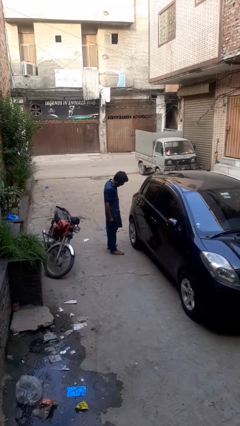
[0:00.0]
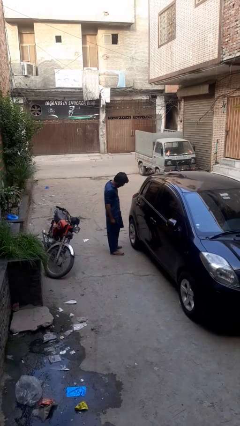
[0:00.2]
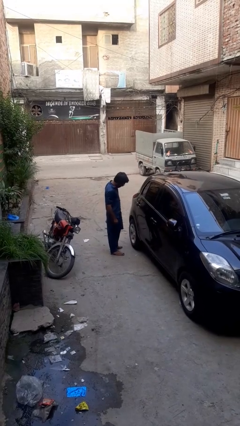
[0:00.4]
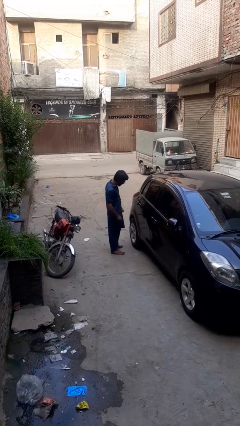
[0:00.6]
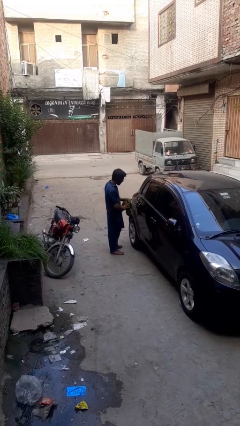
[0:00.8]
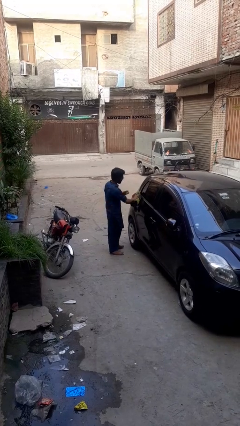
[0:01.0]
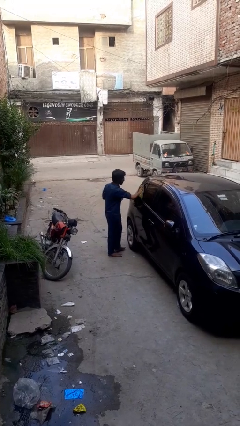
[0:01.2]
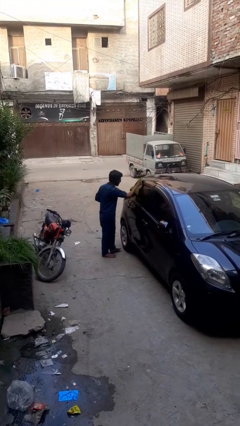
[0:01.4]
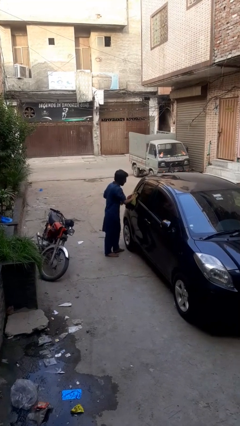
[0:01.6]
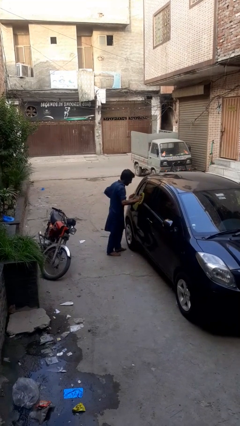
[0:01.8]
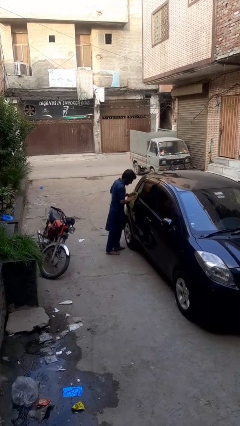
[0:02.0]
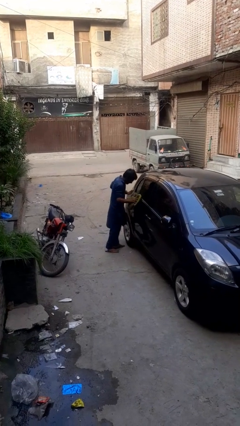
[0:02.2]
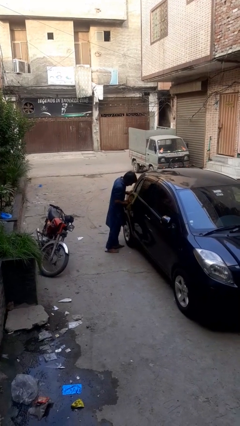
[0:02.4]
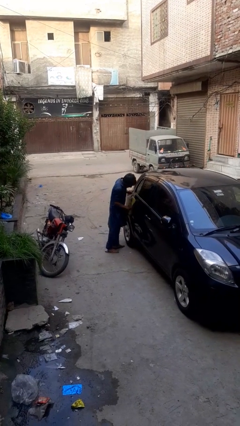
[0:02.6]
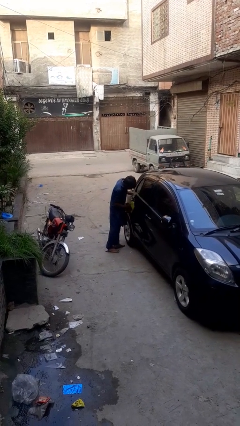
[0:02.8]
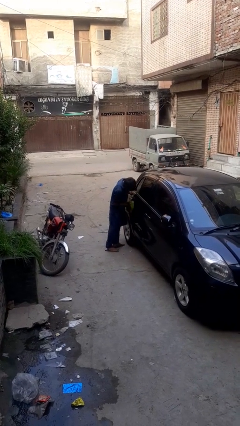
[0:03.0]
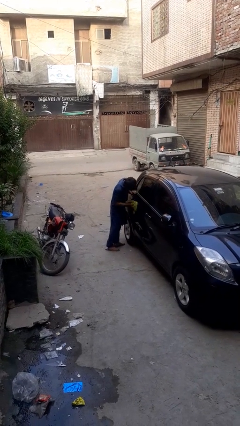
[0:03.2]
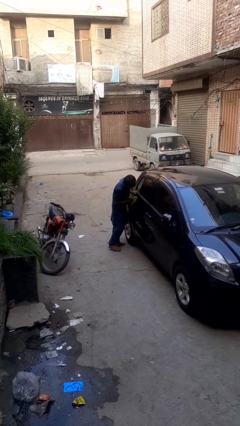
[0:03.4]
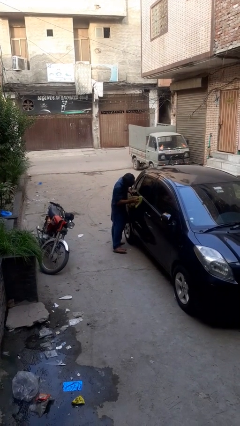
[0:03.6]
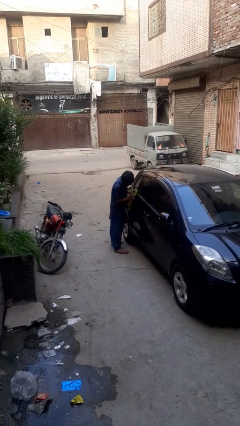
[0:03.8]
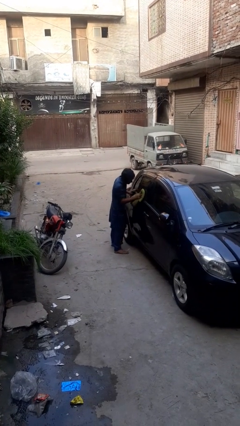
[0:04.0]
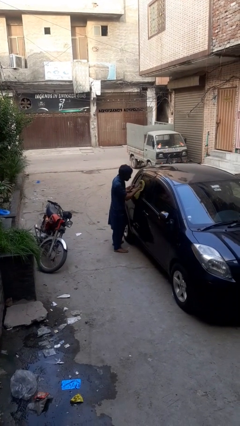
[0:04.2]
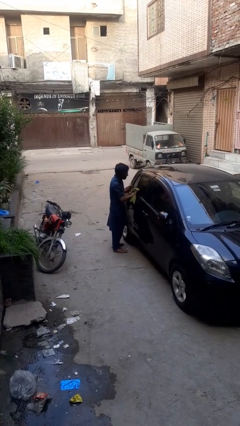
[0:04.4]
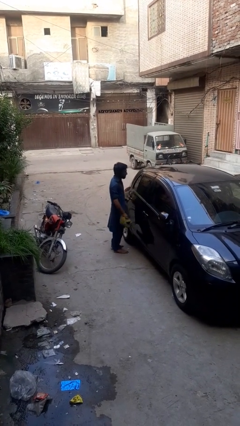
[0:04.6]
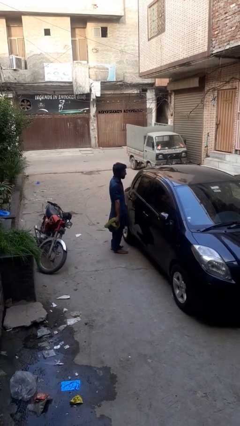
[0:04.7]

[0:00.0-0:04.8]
person polishes car with rag

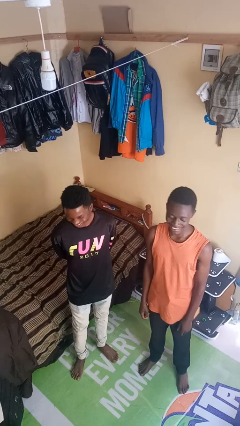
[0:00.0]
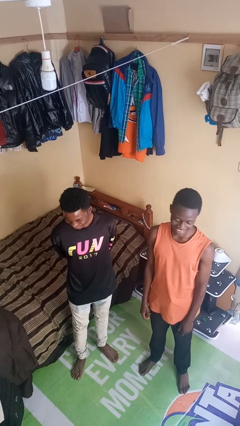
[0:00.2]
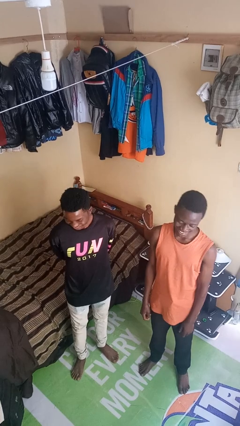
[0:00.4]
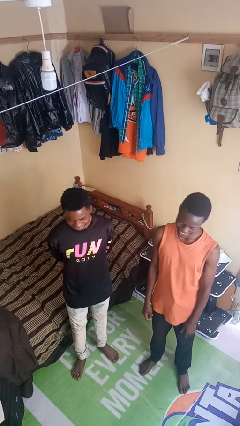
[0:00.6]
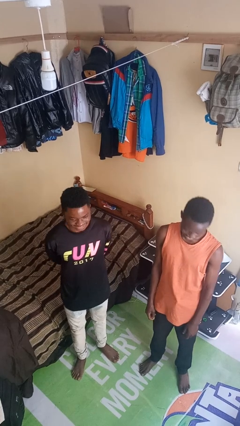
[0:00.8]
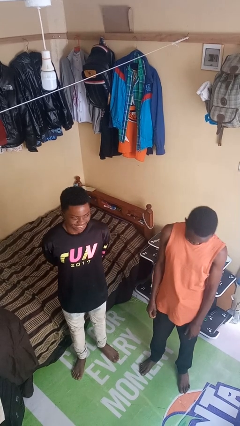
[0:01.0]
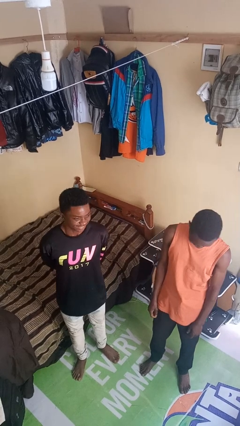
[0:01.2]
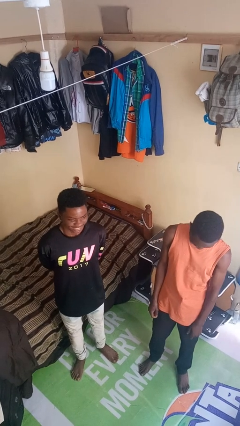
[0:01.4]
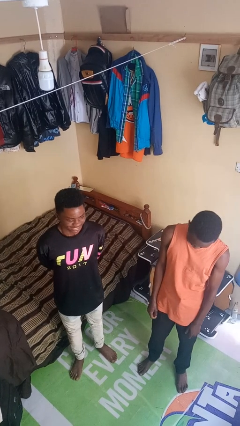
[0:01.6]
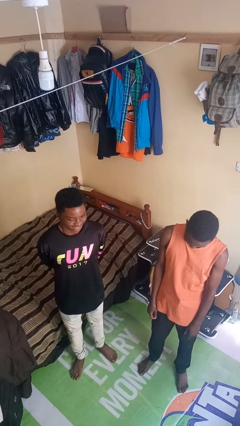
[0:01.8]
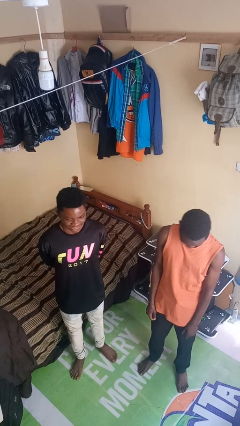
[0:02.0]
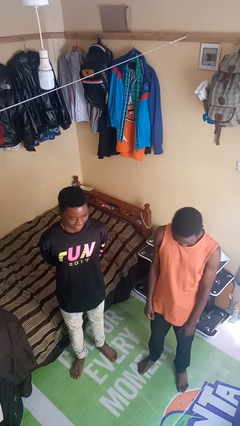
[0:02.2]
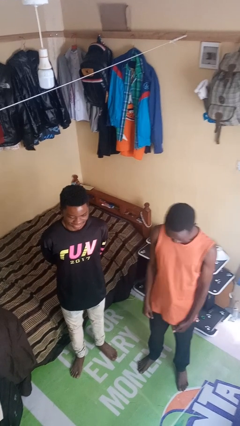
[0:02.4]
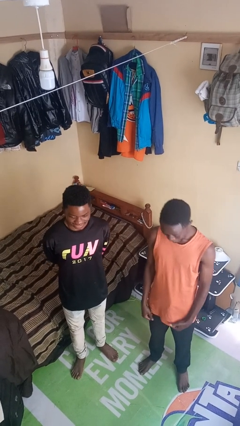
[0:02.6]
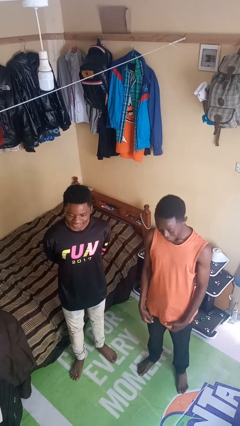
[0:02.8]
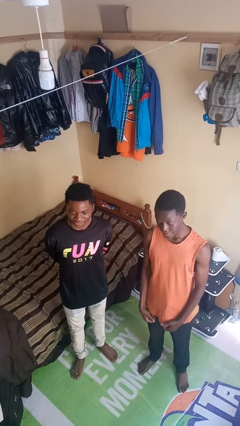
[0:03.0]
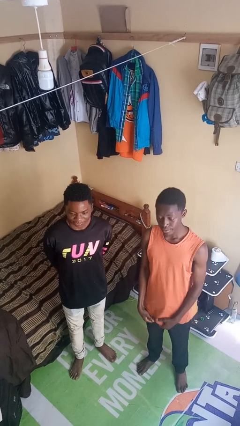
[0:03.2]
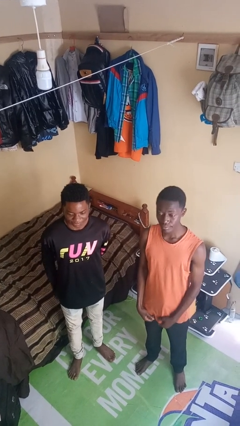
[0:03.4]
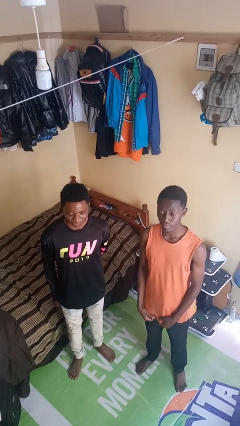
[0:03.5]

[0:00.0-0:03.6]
person laughs with person

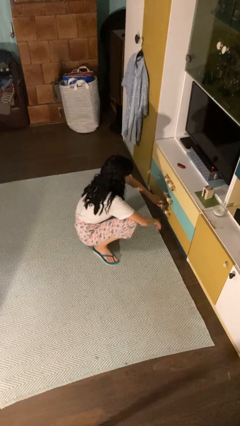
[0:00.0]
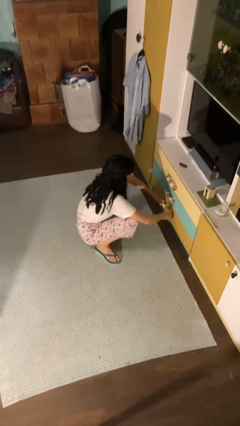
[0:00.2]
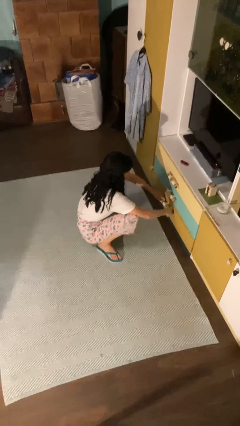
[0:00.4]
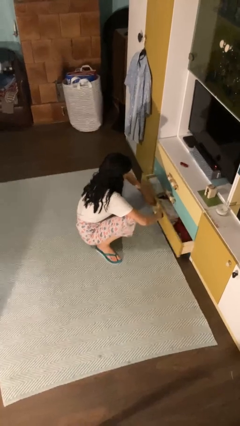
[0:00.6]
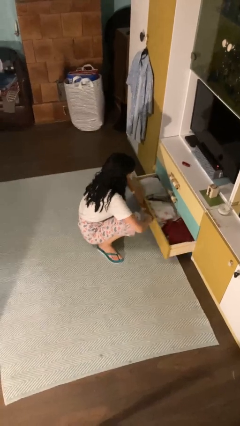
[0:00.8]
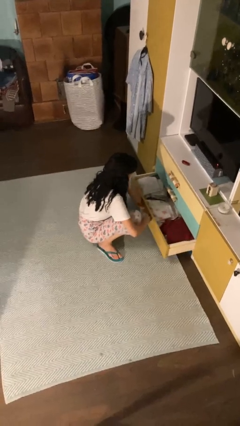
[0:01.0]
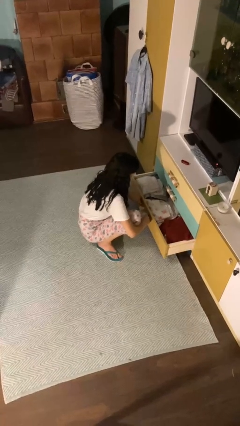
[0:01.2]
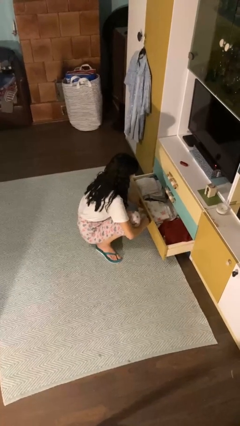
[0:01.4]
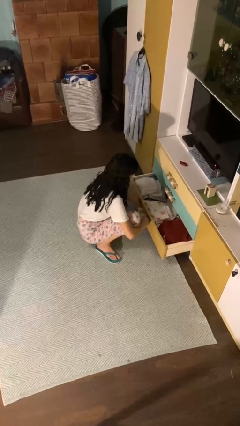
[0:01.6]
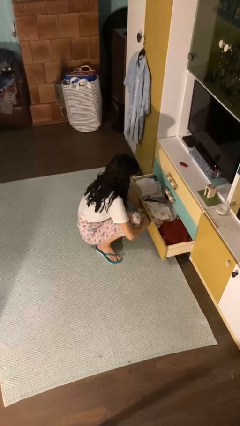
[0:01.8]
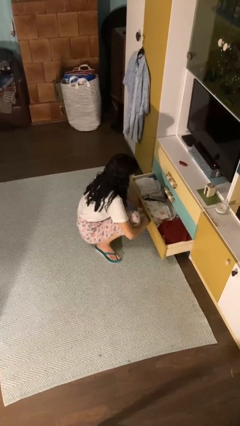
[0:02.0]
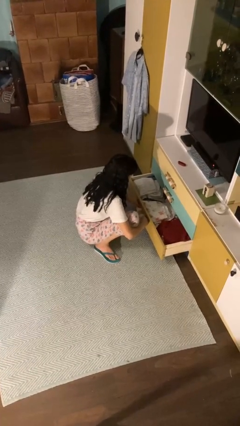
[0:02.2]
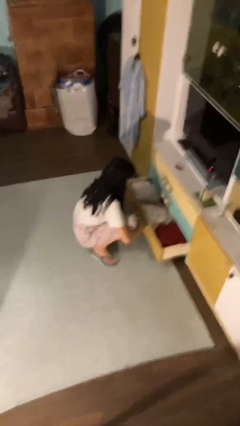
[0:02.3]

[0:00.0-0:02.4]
person opens dresser drawer

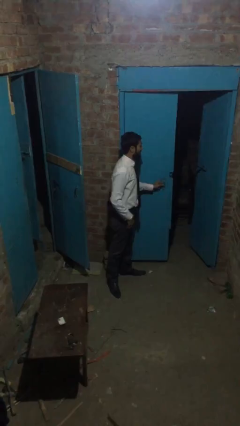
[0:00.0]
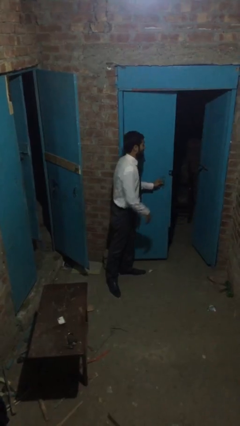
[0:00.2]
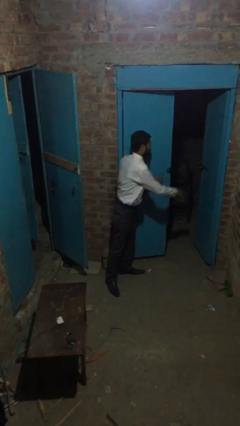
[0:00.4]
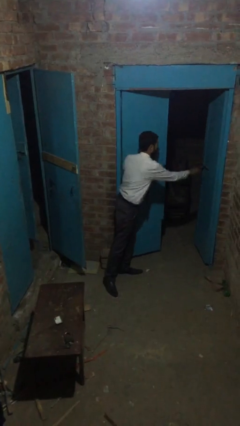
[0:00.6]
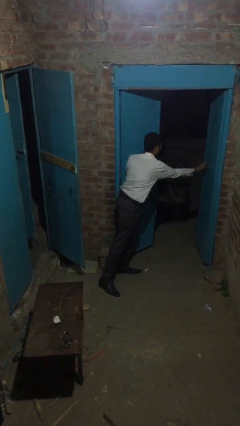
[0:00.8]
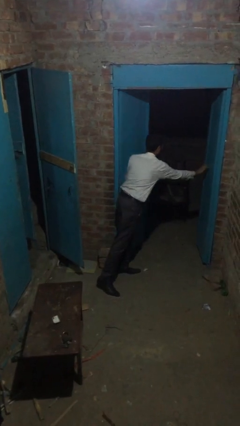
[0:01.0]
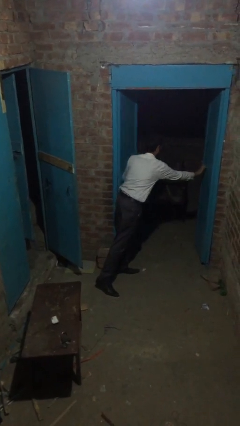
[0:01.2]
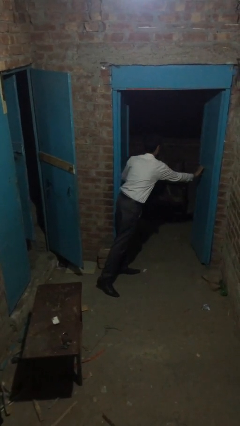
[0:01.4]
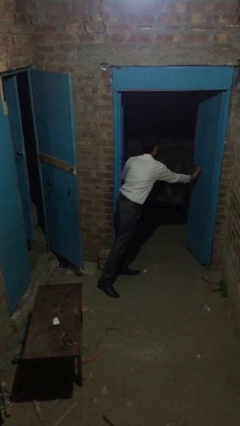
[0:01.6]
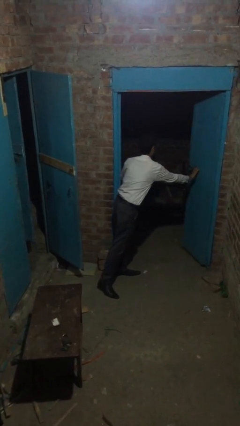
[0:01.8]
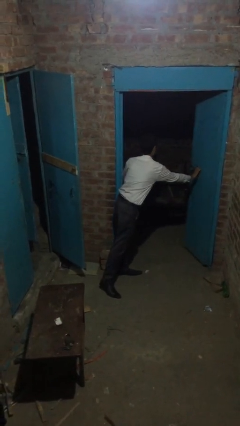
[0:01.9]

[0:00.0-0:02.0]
person opens facility door

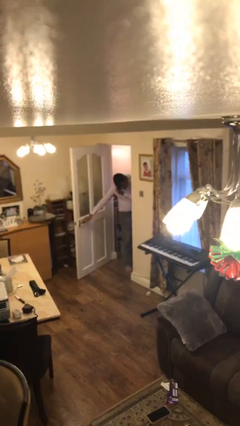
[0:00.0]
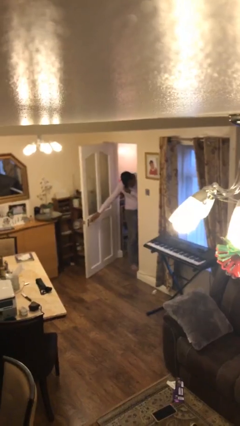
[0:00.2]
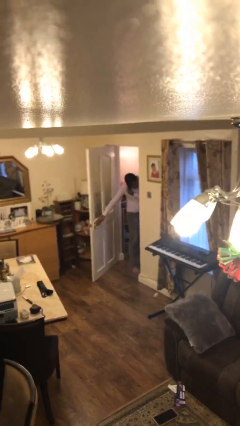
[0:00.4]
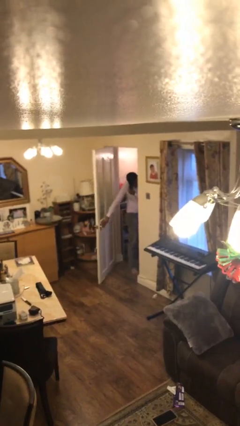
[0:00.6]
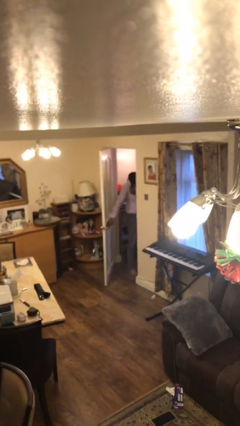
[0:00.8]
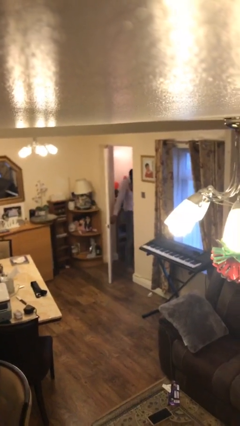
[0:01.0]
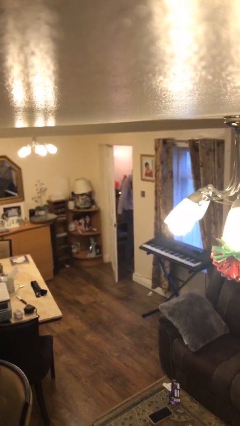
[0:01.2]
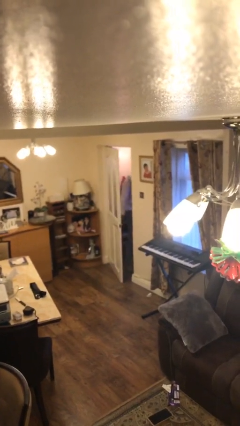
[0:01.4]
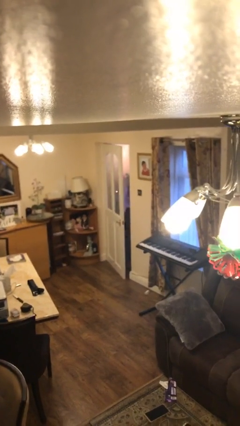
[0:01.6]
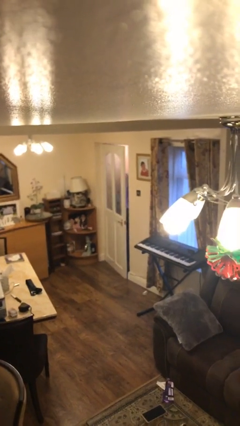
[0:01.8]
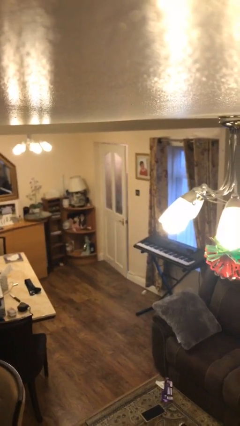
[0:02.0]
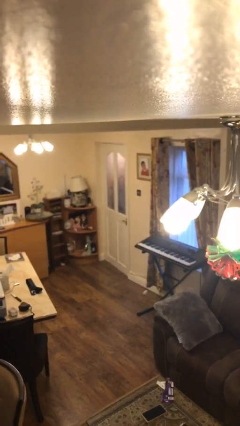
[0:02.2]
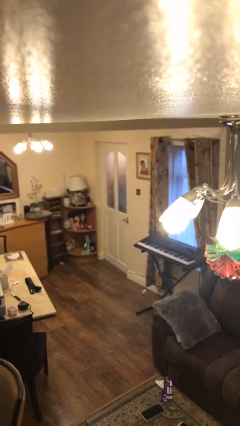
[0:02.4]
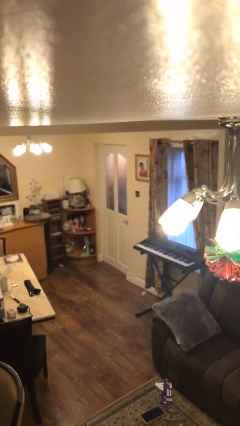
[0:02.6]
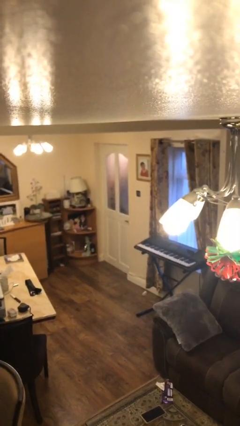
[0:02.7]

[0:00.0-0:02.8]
person closes facility door

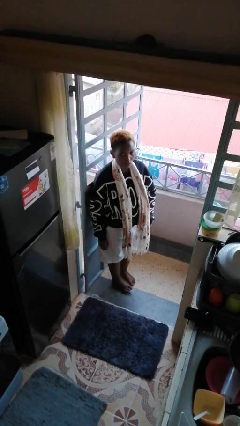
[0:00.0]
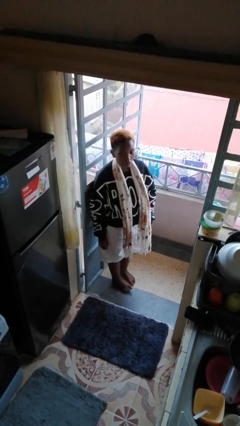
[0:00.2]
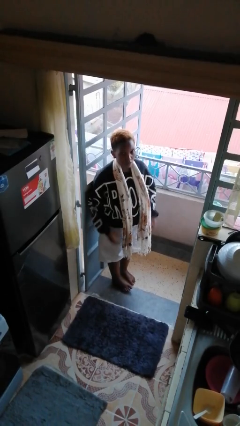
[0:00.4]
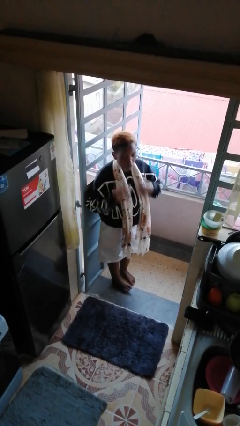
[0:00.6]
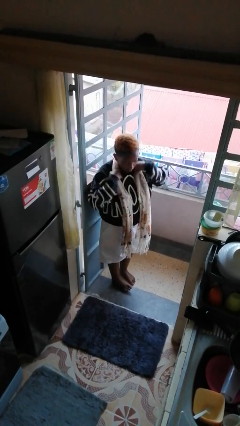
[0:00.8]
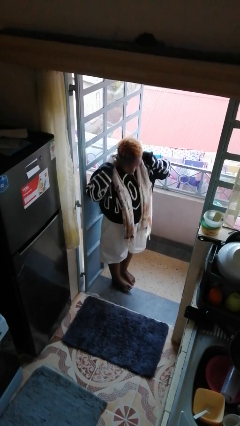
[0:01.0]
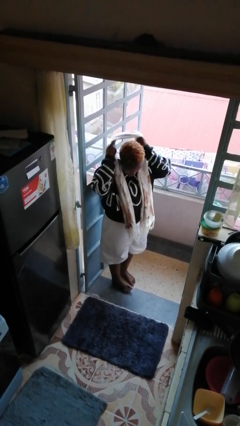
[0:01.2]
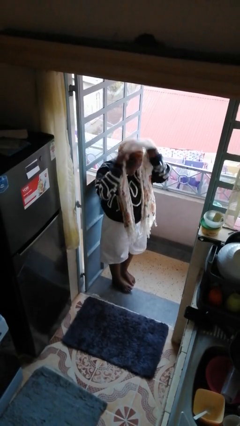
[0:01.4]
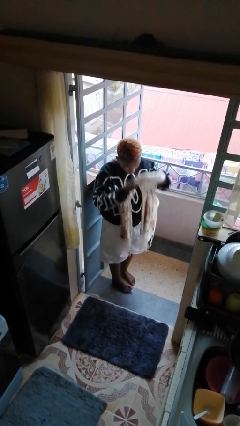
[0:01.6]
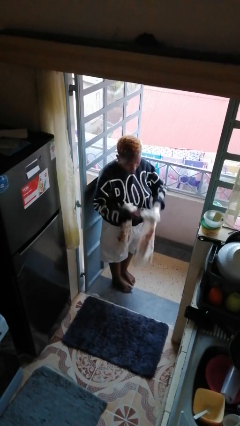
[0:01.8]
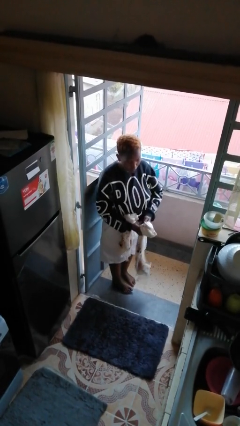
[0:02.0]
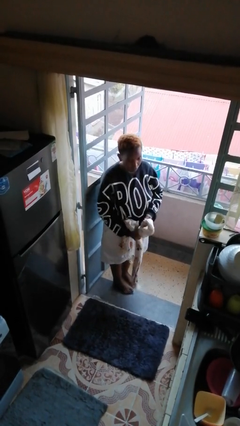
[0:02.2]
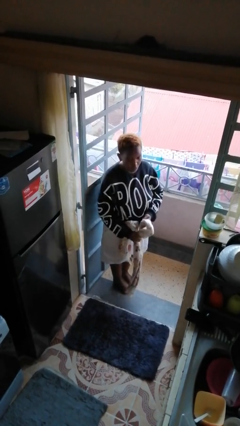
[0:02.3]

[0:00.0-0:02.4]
person takes off scarf
